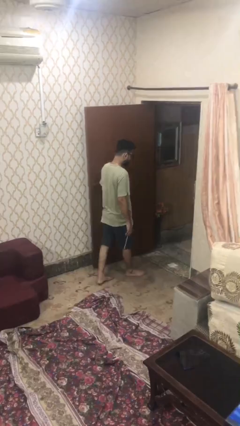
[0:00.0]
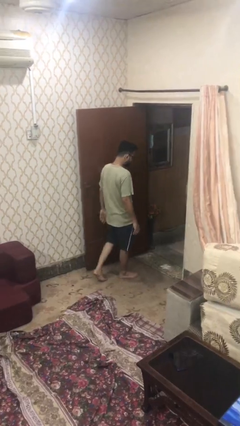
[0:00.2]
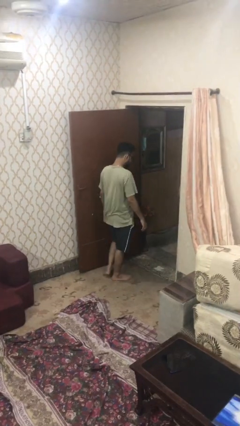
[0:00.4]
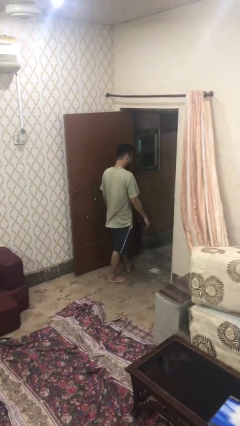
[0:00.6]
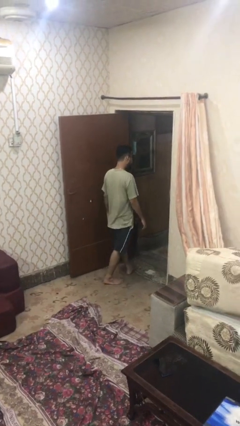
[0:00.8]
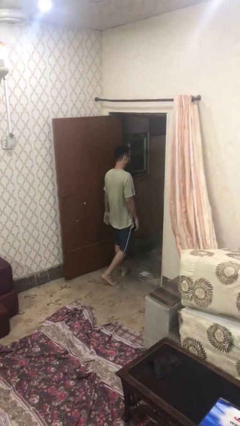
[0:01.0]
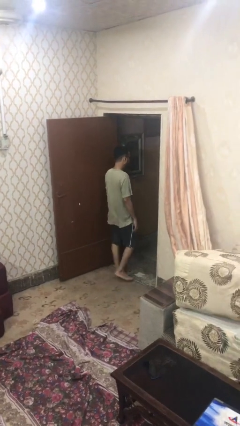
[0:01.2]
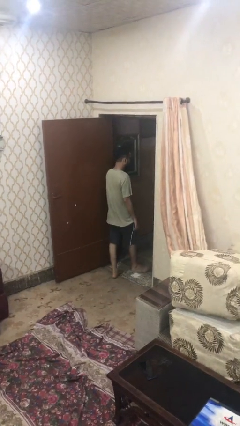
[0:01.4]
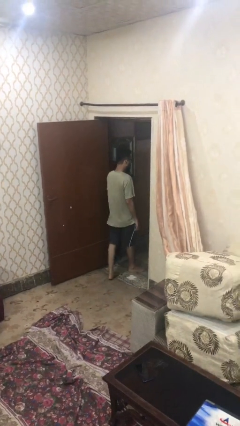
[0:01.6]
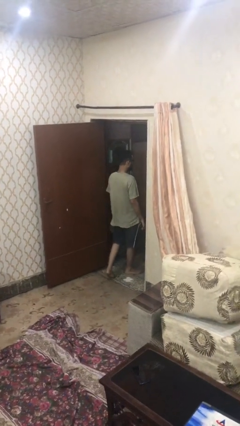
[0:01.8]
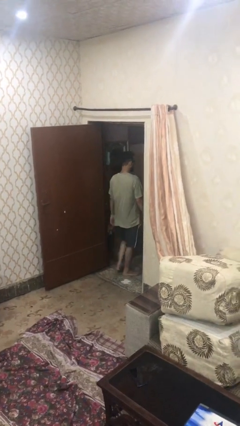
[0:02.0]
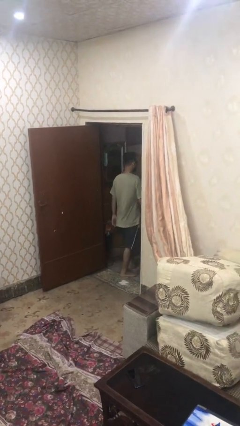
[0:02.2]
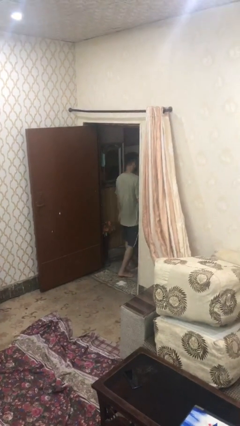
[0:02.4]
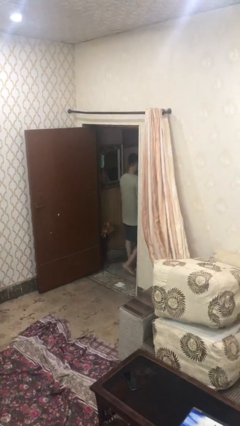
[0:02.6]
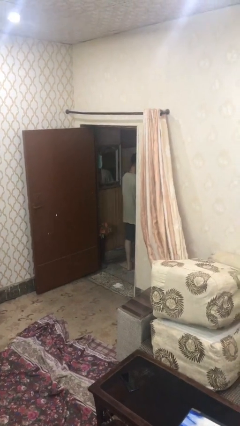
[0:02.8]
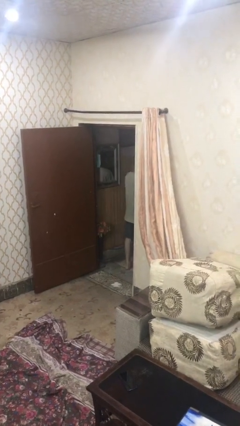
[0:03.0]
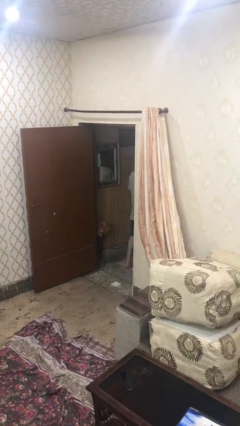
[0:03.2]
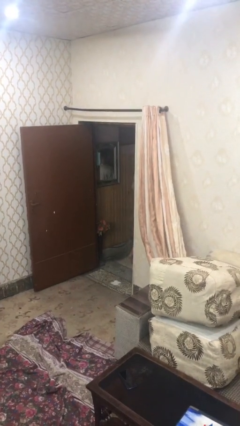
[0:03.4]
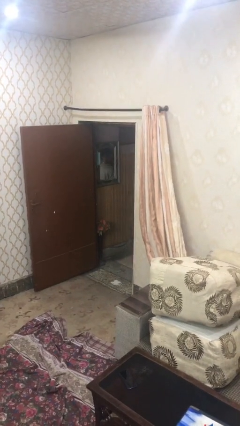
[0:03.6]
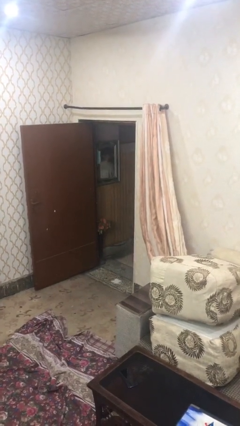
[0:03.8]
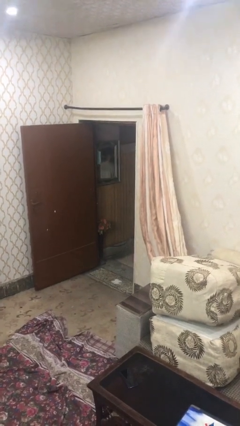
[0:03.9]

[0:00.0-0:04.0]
person exits scene through structure

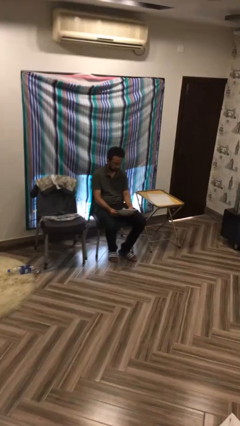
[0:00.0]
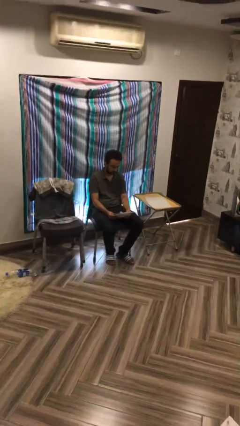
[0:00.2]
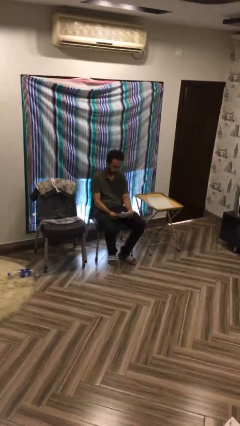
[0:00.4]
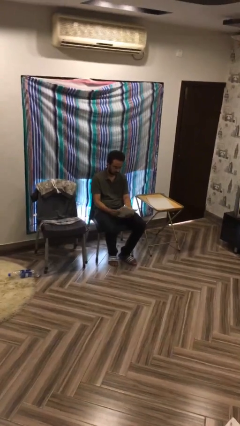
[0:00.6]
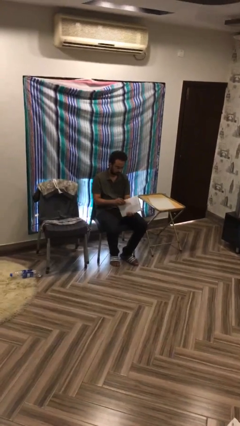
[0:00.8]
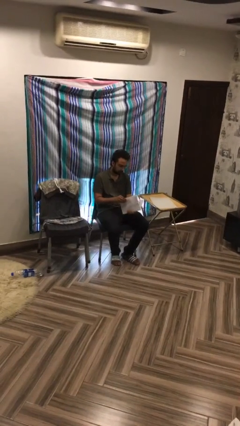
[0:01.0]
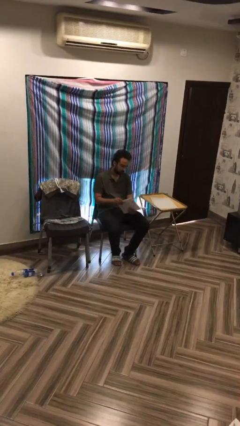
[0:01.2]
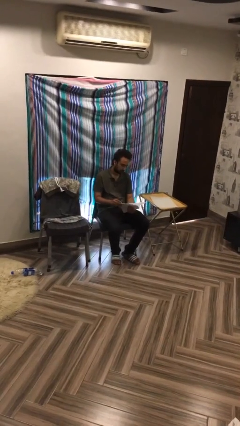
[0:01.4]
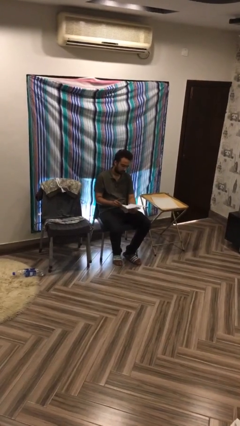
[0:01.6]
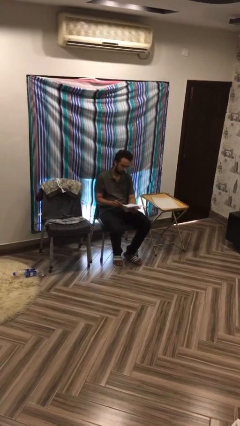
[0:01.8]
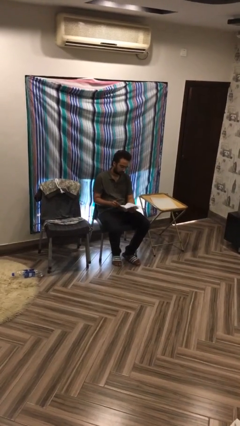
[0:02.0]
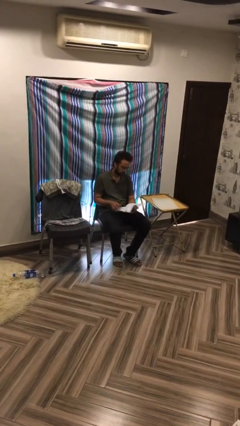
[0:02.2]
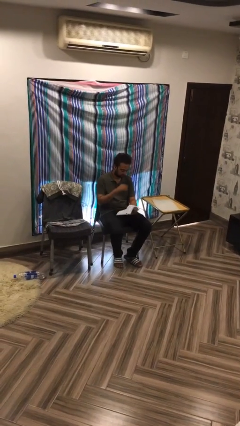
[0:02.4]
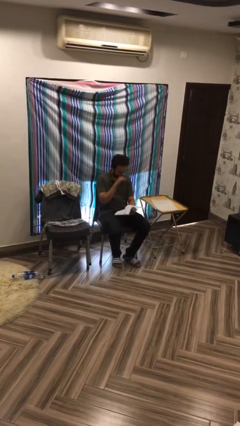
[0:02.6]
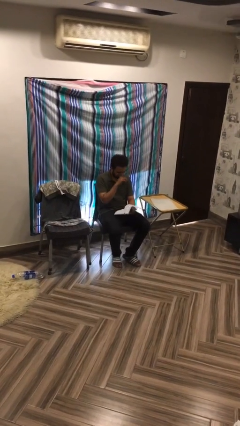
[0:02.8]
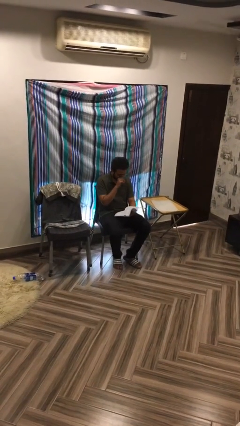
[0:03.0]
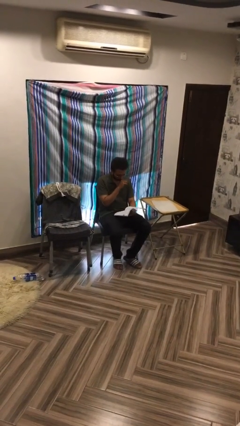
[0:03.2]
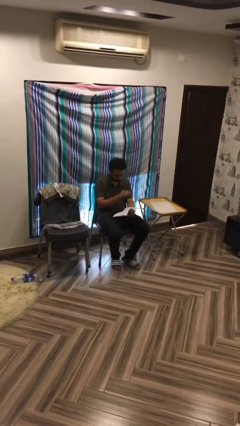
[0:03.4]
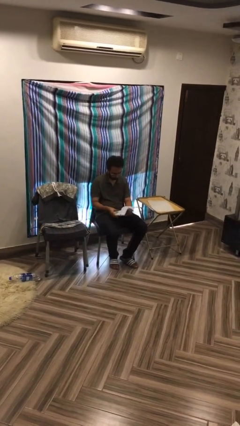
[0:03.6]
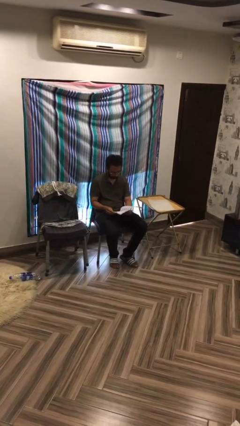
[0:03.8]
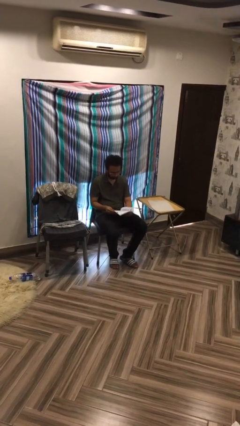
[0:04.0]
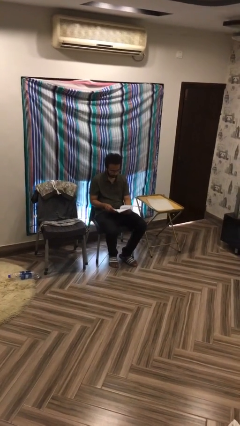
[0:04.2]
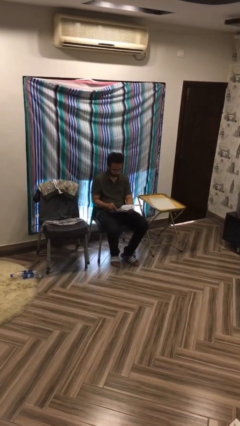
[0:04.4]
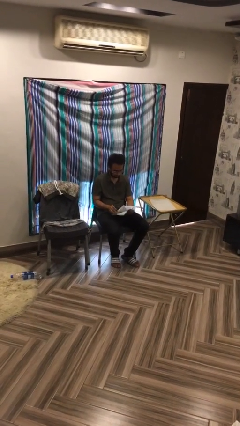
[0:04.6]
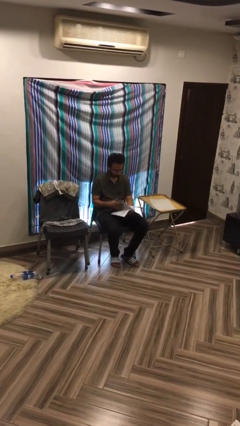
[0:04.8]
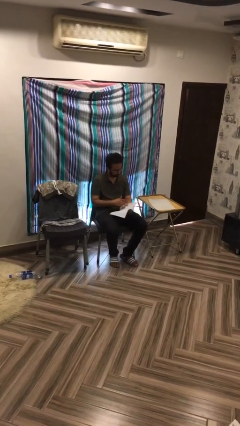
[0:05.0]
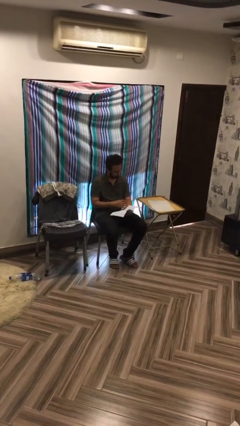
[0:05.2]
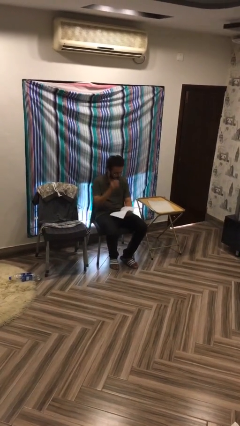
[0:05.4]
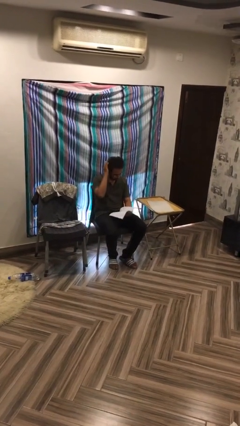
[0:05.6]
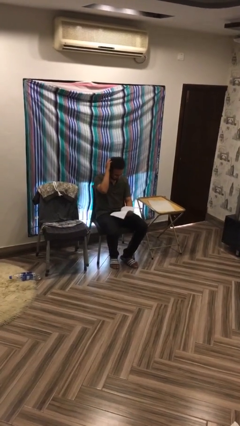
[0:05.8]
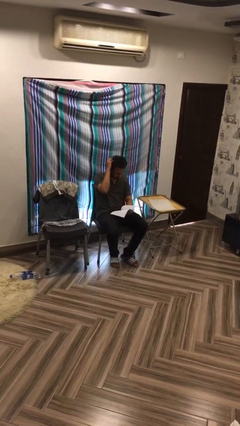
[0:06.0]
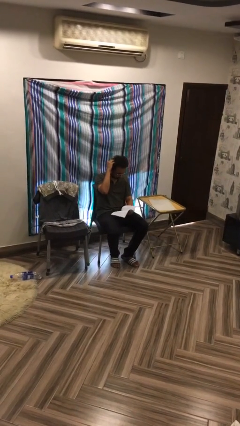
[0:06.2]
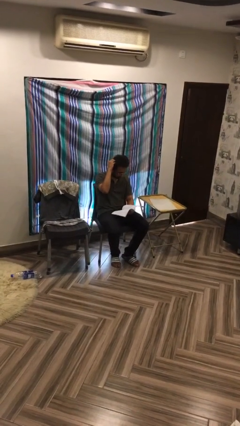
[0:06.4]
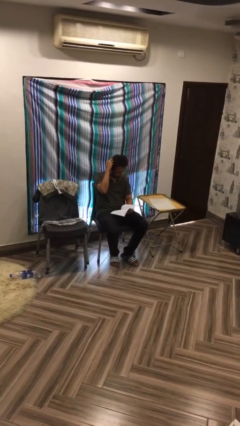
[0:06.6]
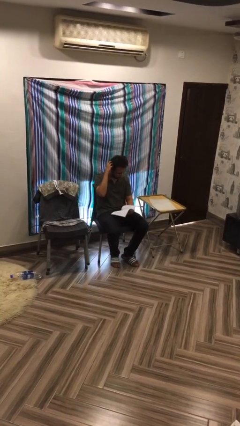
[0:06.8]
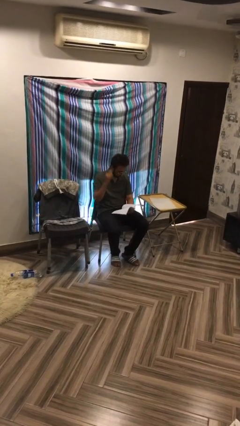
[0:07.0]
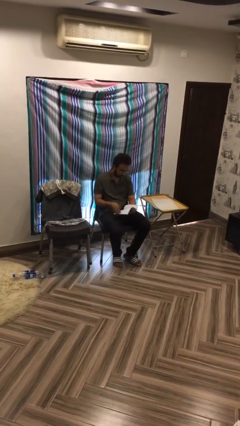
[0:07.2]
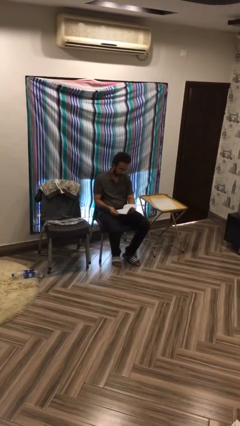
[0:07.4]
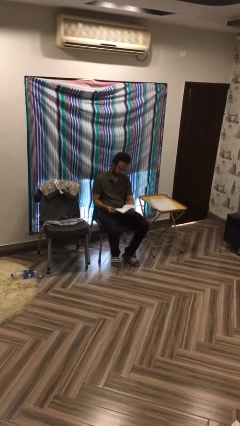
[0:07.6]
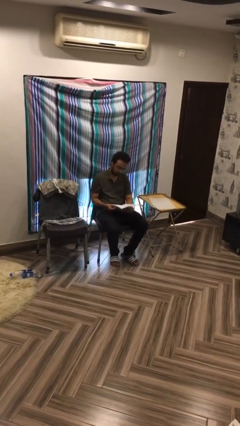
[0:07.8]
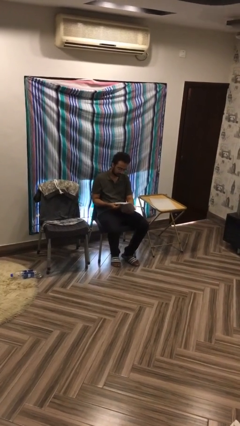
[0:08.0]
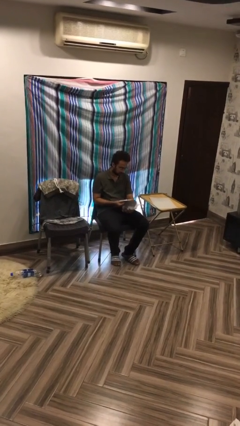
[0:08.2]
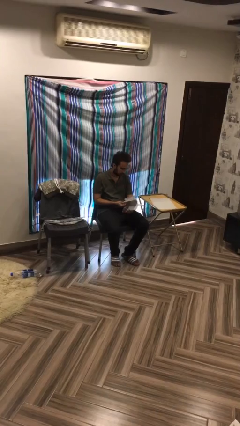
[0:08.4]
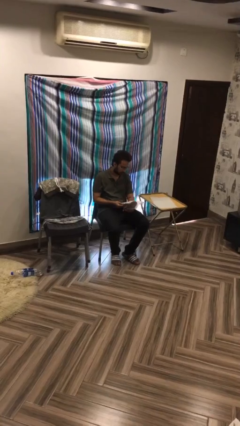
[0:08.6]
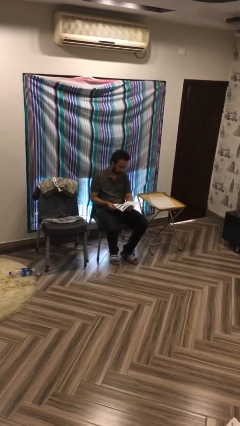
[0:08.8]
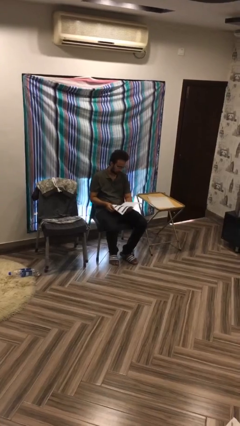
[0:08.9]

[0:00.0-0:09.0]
person reads document

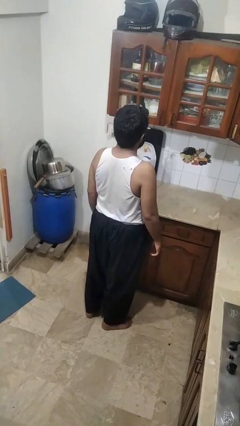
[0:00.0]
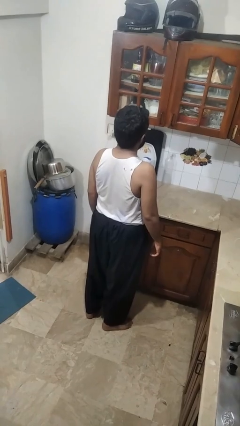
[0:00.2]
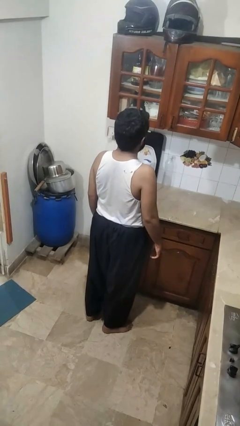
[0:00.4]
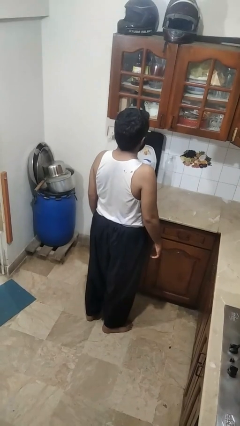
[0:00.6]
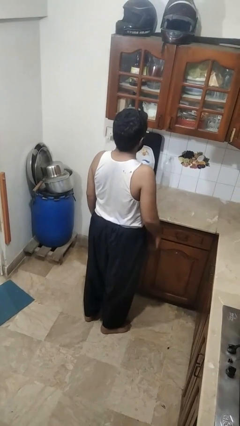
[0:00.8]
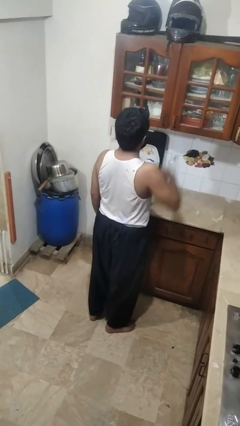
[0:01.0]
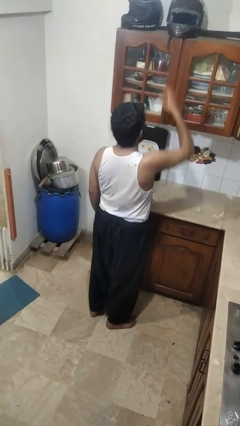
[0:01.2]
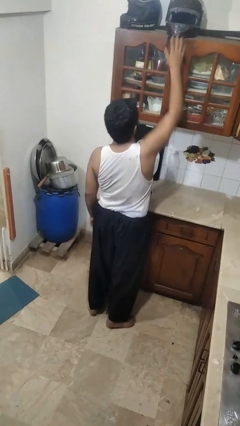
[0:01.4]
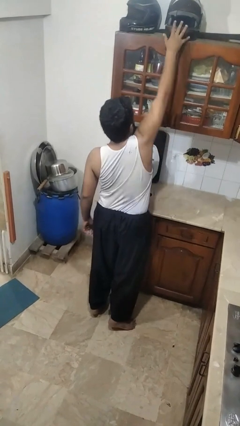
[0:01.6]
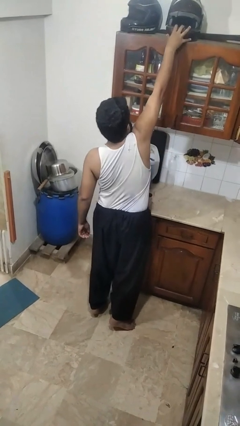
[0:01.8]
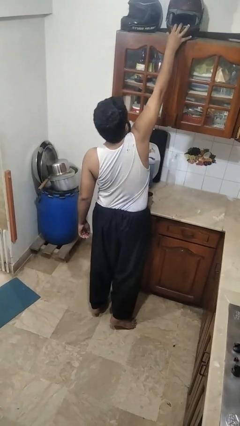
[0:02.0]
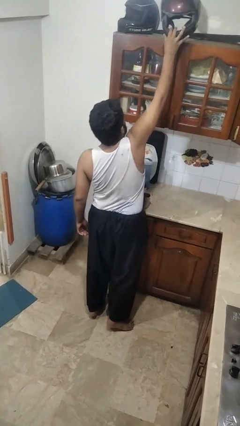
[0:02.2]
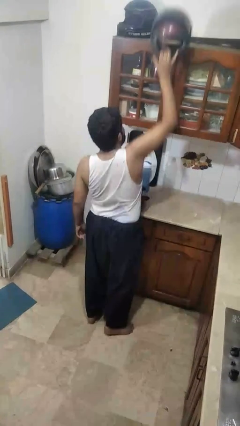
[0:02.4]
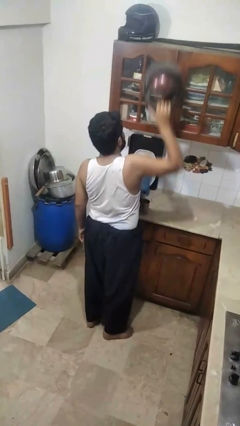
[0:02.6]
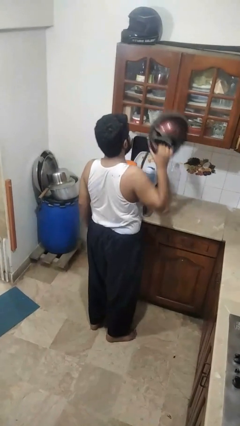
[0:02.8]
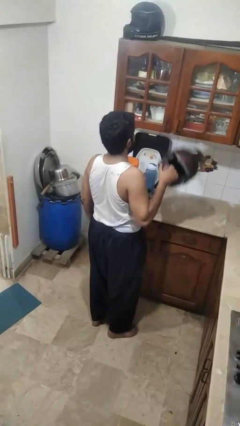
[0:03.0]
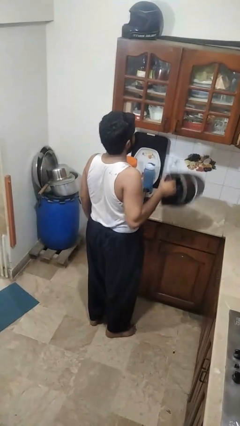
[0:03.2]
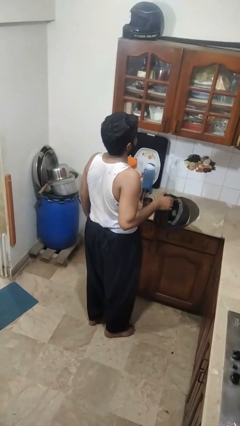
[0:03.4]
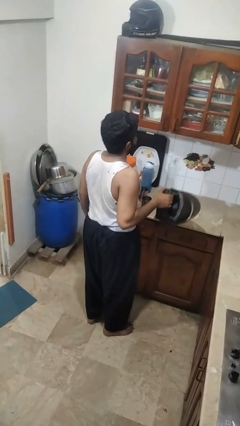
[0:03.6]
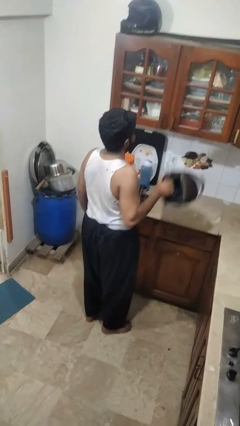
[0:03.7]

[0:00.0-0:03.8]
person picks up object from shelf

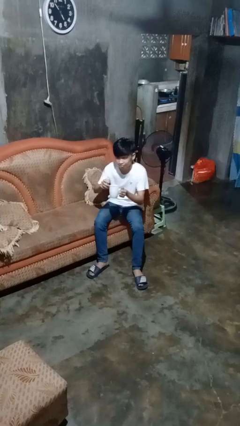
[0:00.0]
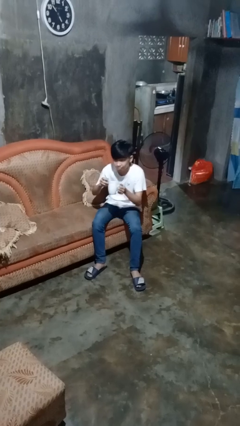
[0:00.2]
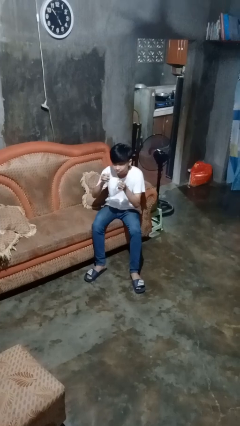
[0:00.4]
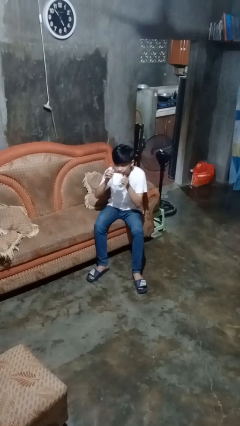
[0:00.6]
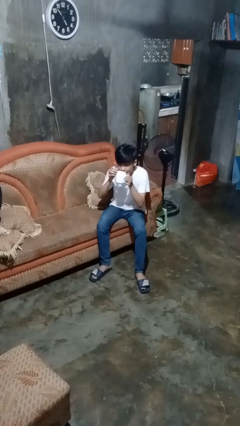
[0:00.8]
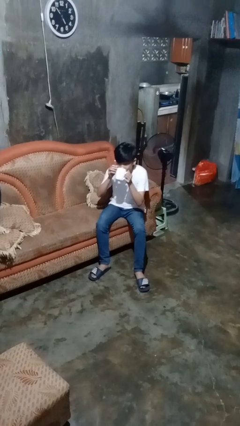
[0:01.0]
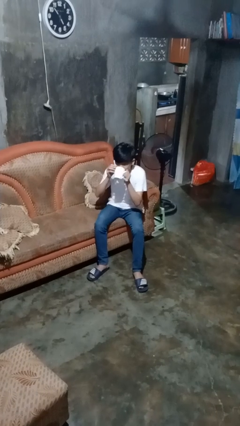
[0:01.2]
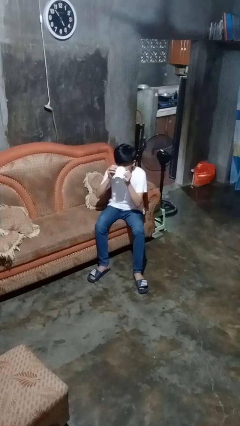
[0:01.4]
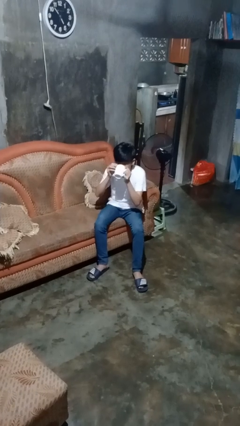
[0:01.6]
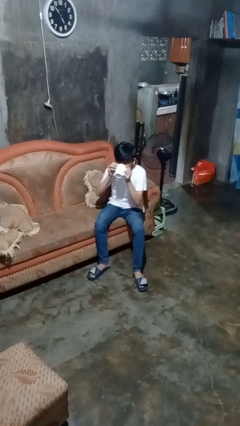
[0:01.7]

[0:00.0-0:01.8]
person drinks from mug
